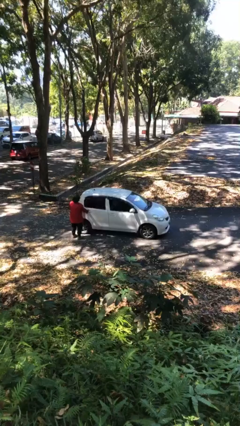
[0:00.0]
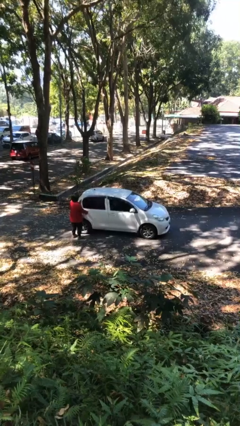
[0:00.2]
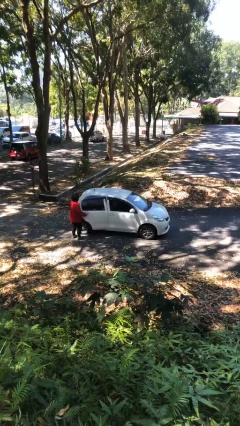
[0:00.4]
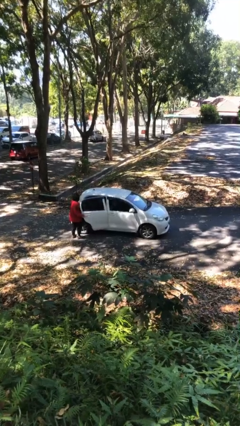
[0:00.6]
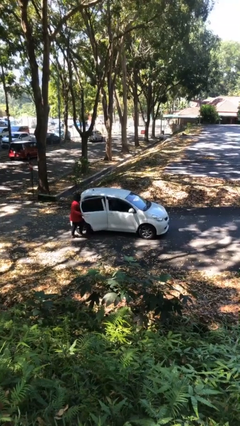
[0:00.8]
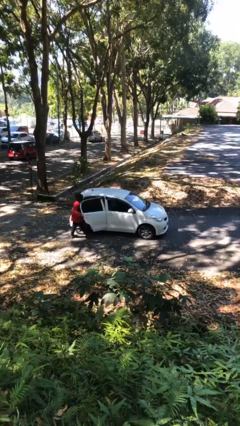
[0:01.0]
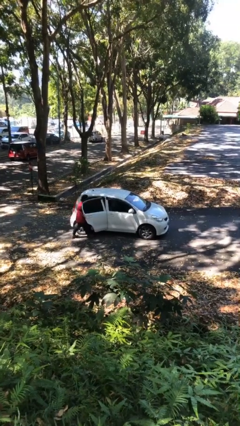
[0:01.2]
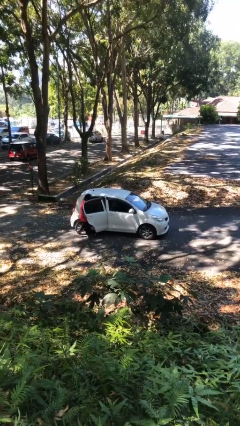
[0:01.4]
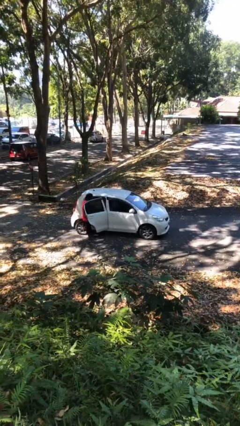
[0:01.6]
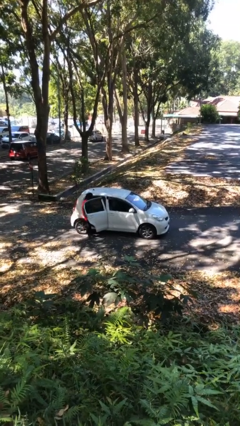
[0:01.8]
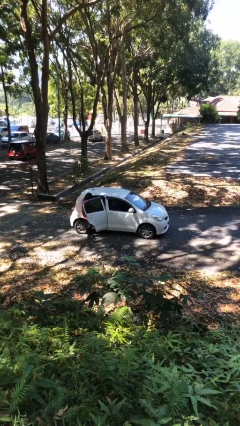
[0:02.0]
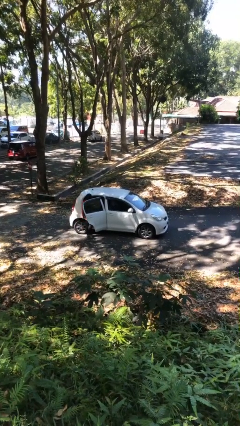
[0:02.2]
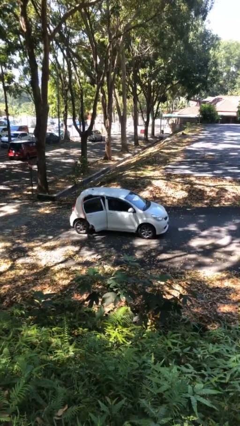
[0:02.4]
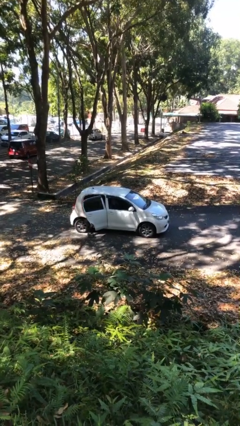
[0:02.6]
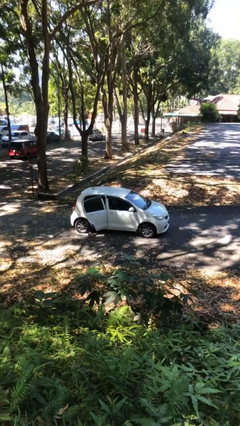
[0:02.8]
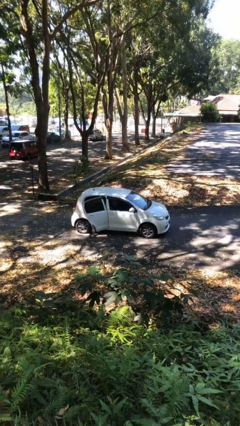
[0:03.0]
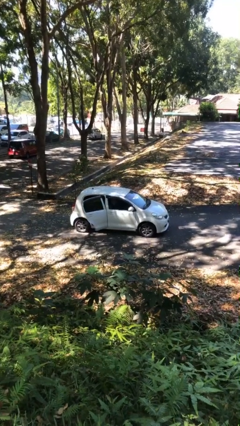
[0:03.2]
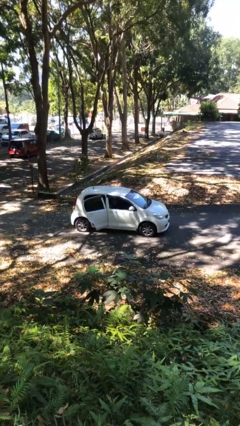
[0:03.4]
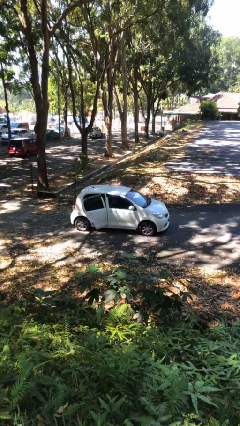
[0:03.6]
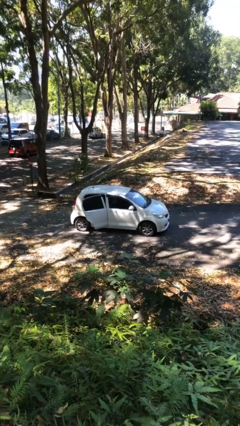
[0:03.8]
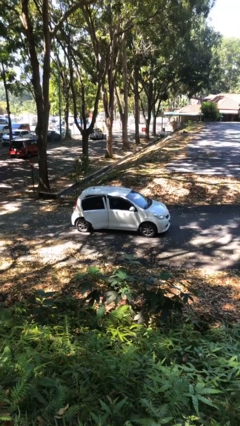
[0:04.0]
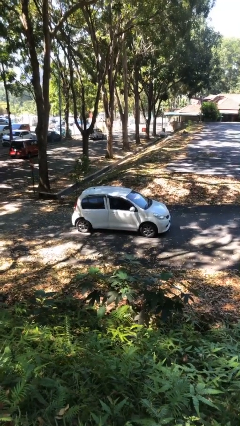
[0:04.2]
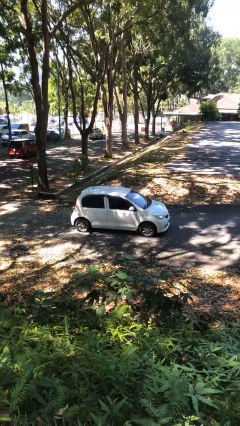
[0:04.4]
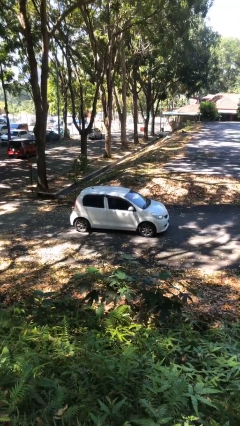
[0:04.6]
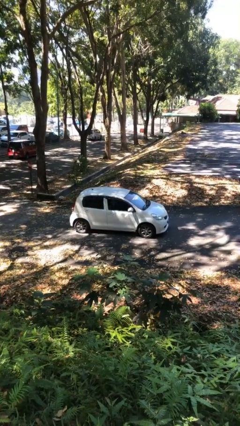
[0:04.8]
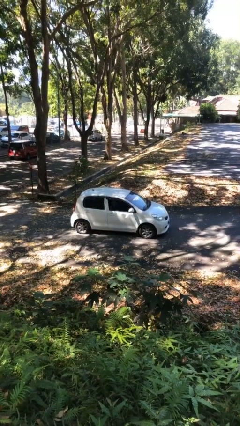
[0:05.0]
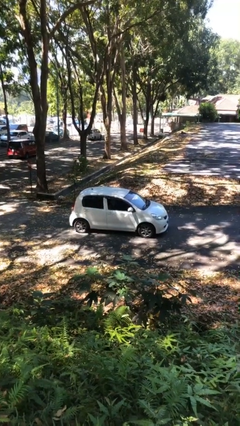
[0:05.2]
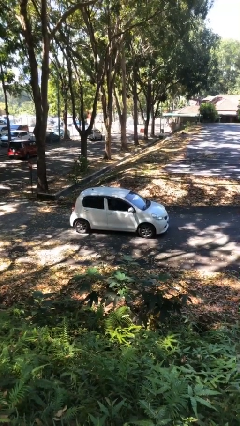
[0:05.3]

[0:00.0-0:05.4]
car picks up person

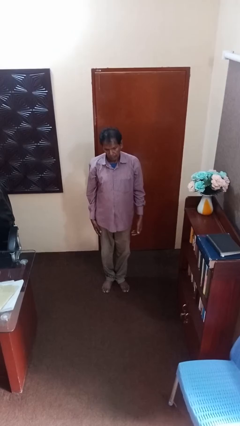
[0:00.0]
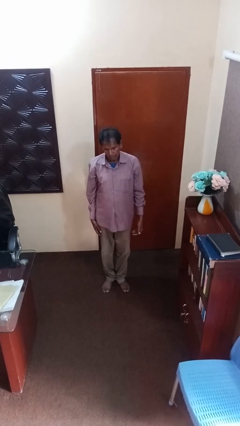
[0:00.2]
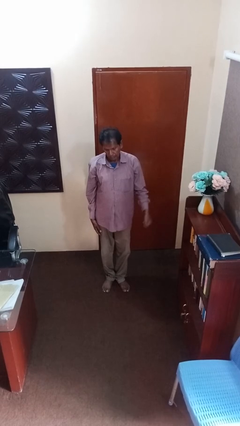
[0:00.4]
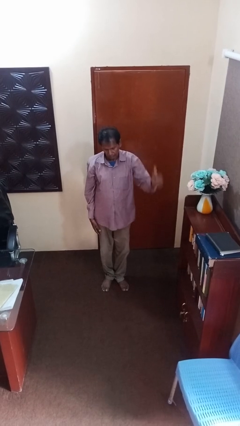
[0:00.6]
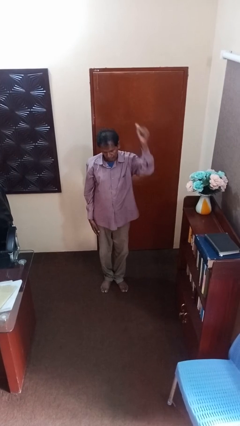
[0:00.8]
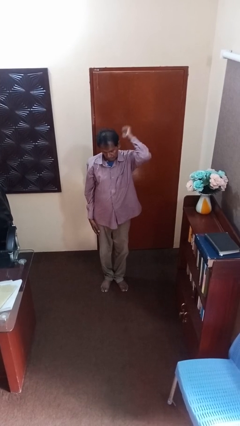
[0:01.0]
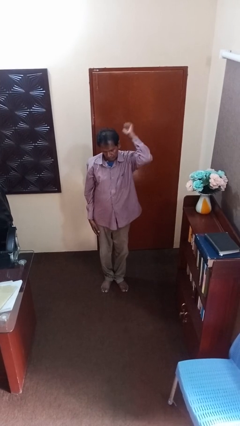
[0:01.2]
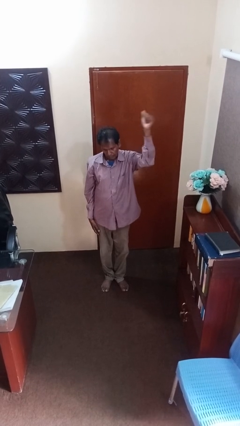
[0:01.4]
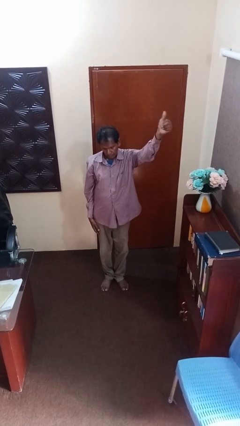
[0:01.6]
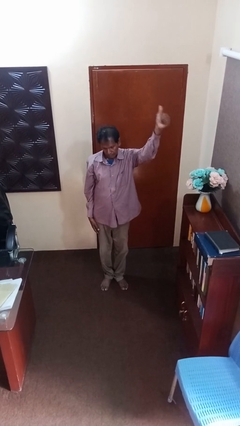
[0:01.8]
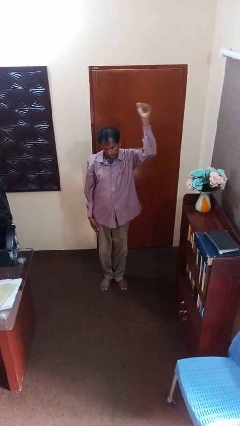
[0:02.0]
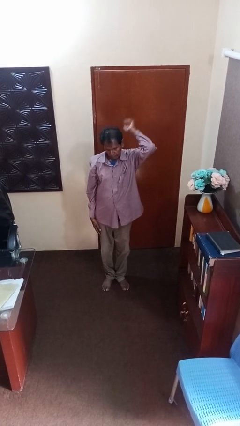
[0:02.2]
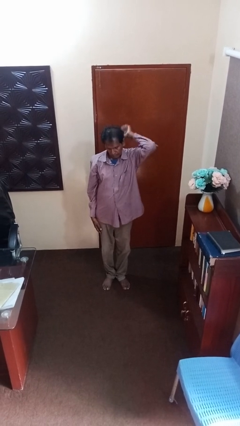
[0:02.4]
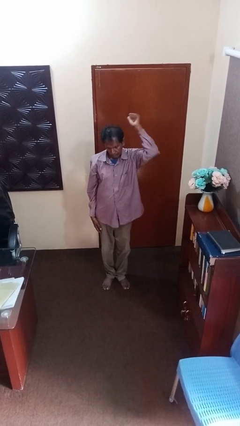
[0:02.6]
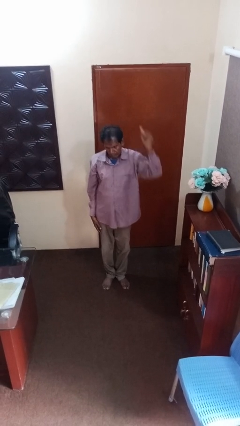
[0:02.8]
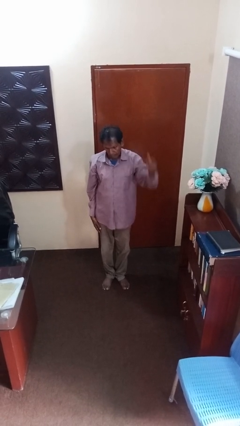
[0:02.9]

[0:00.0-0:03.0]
person gestures behind me

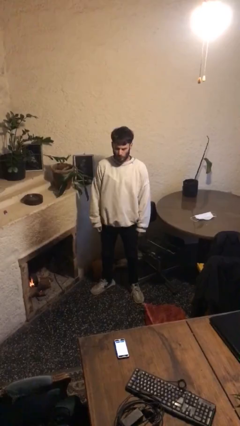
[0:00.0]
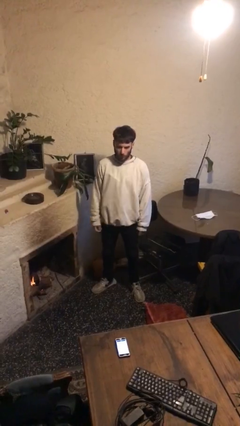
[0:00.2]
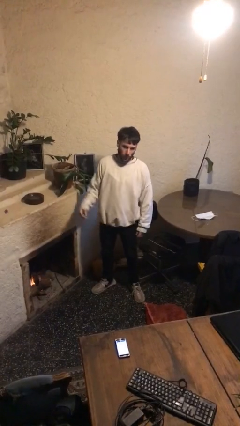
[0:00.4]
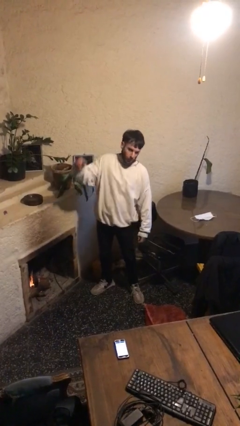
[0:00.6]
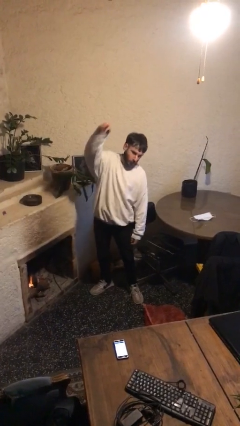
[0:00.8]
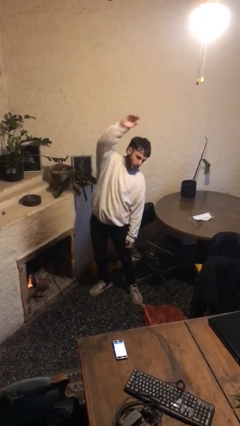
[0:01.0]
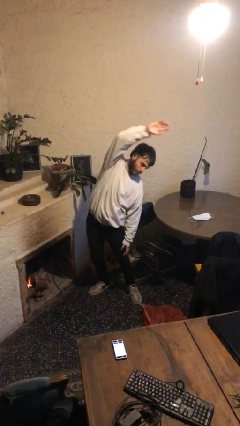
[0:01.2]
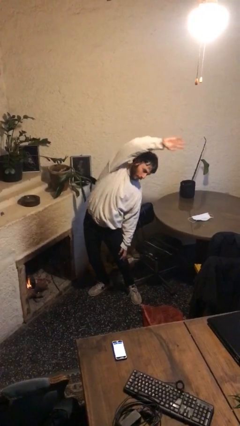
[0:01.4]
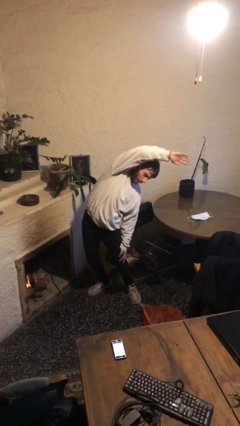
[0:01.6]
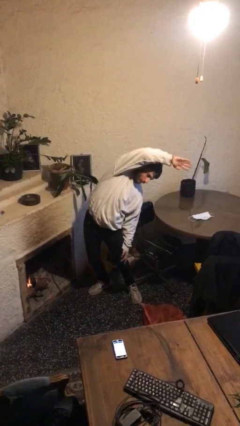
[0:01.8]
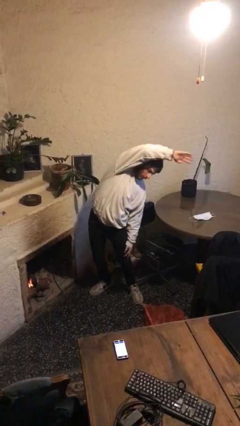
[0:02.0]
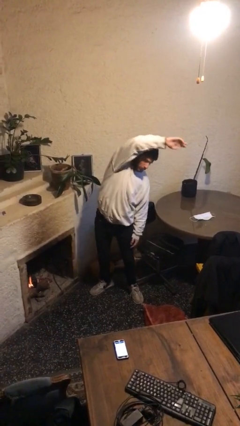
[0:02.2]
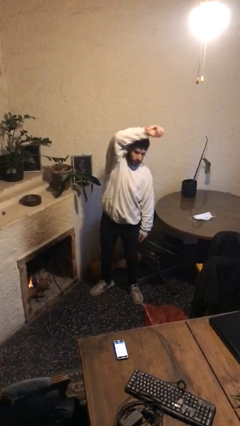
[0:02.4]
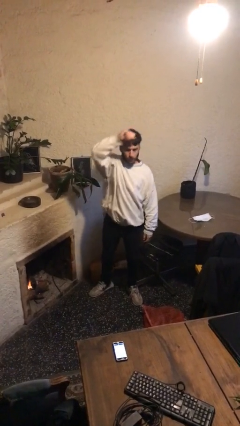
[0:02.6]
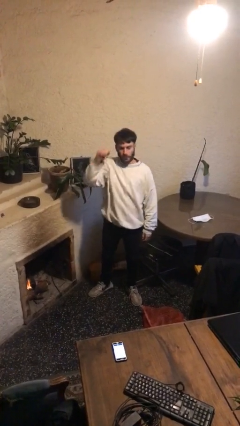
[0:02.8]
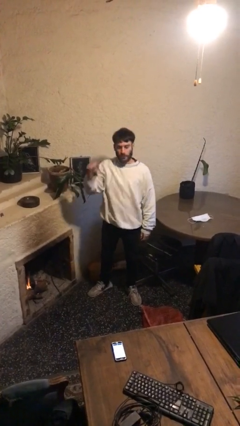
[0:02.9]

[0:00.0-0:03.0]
person stretches arms to side

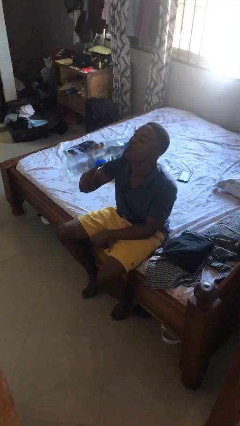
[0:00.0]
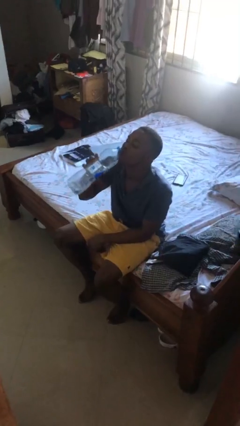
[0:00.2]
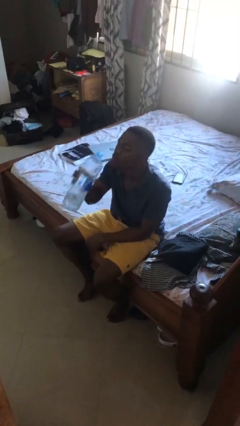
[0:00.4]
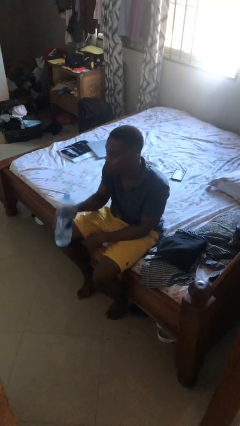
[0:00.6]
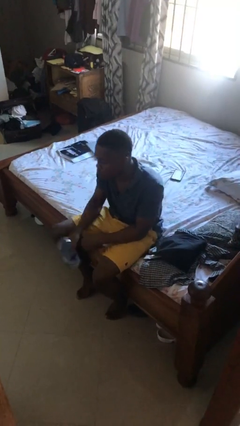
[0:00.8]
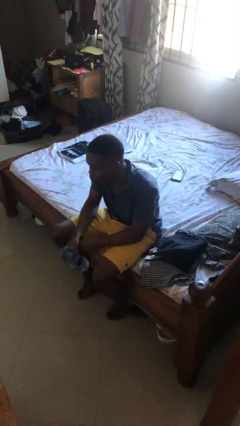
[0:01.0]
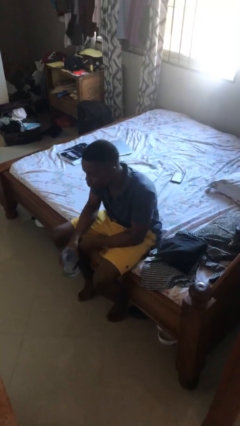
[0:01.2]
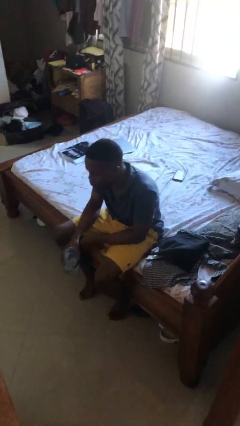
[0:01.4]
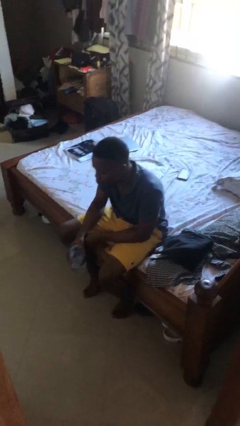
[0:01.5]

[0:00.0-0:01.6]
person drinks from bottle

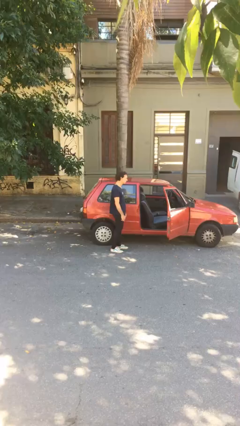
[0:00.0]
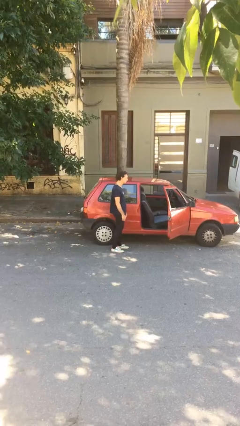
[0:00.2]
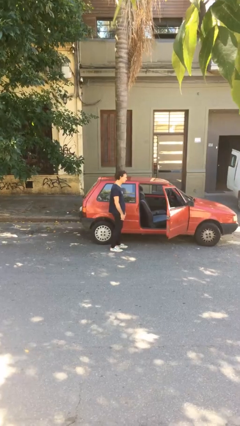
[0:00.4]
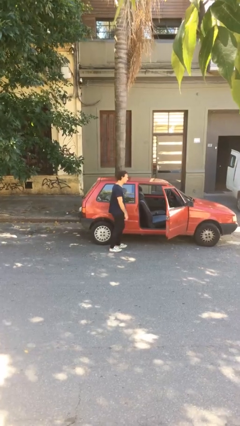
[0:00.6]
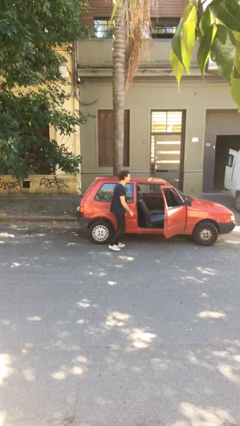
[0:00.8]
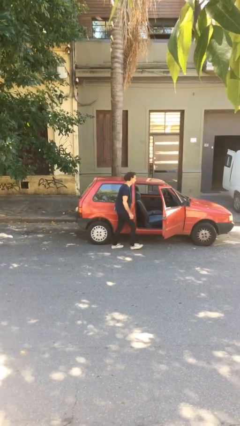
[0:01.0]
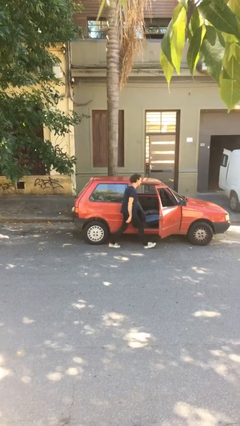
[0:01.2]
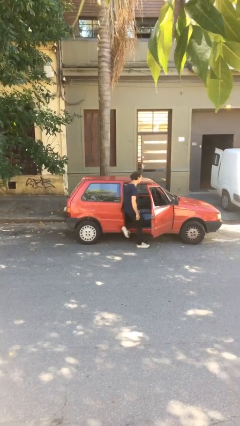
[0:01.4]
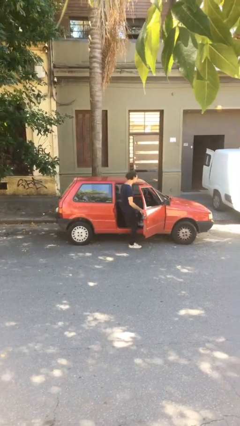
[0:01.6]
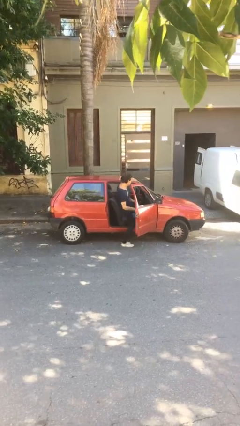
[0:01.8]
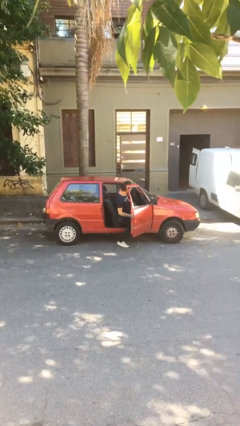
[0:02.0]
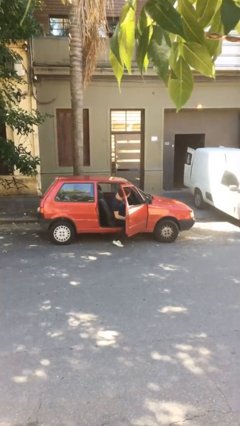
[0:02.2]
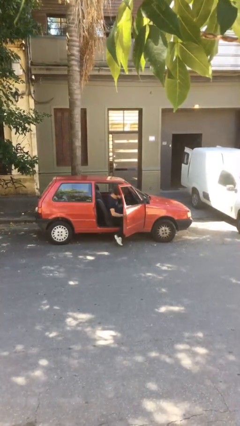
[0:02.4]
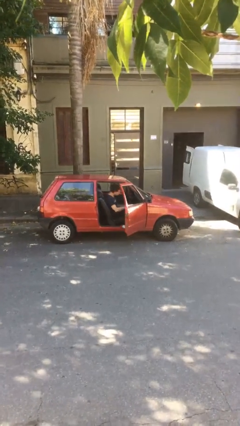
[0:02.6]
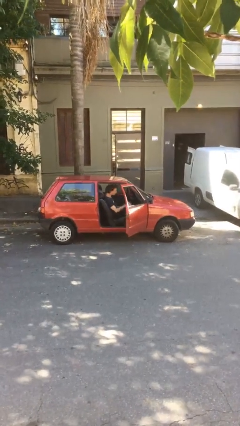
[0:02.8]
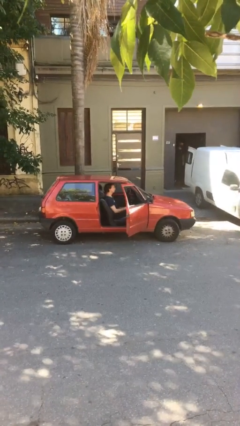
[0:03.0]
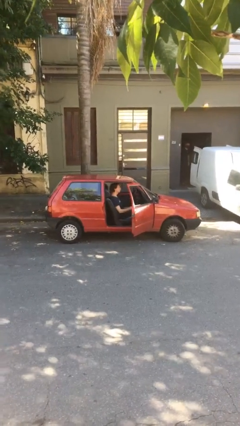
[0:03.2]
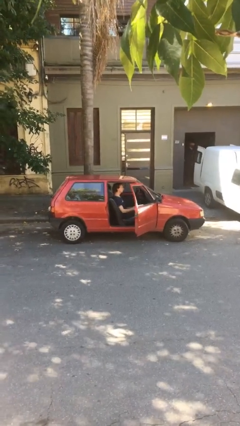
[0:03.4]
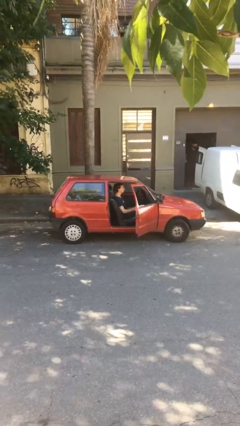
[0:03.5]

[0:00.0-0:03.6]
person enters car

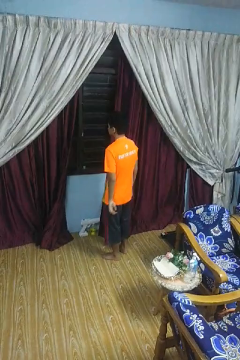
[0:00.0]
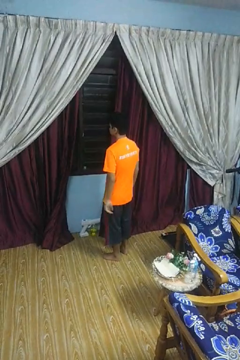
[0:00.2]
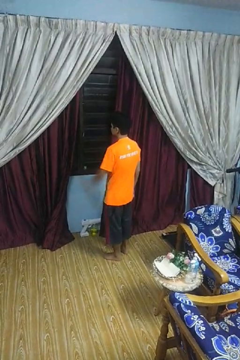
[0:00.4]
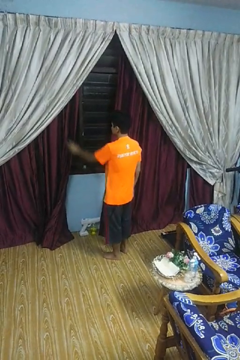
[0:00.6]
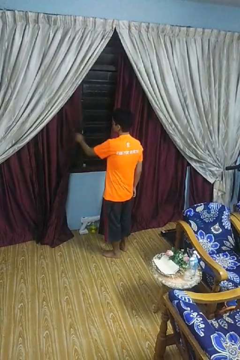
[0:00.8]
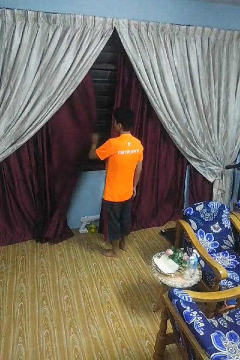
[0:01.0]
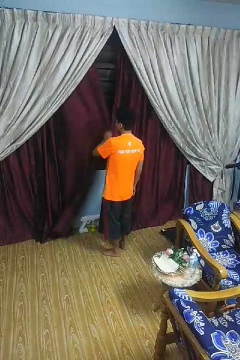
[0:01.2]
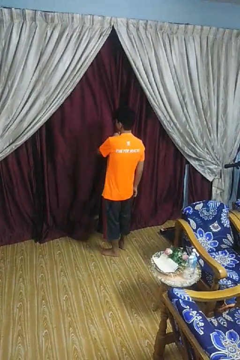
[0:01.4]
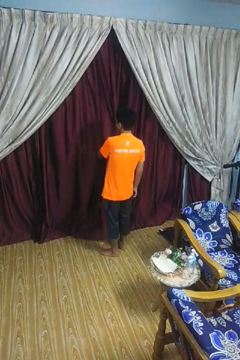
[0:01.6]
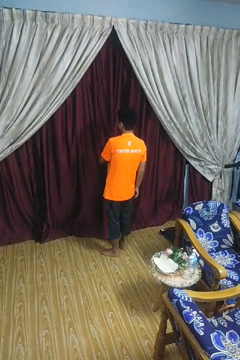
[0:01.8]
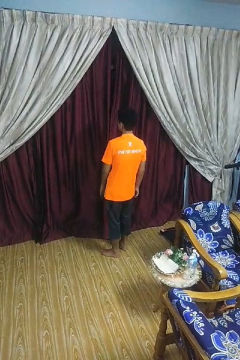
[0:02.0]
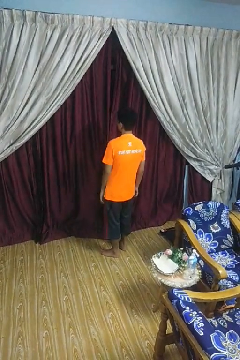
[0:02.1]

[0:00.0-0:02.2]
person closes curtains
